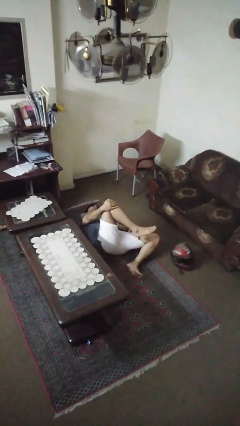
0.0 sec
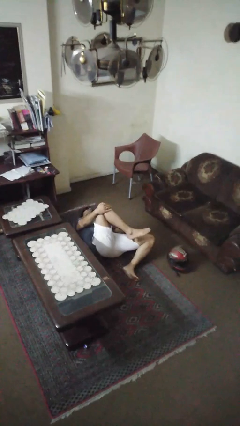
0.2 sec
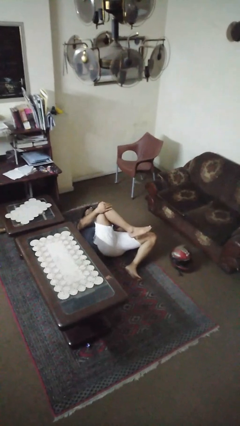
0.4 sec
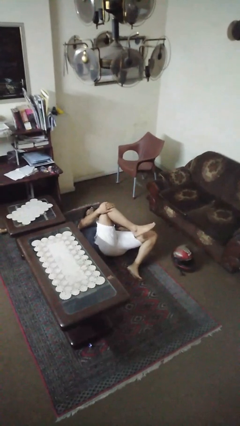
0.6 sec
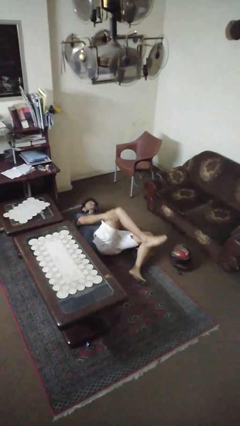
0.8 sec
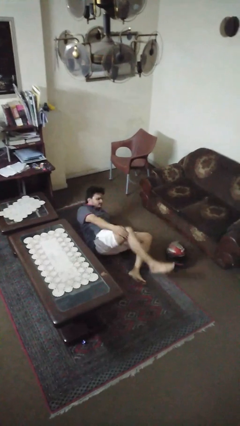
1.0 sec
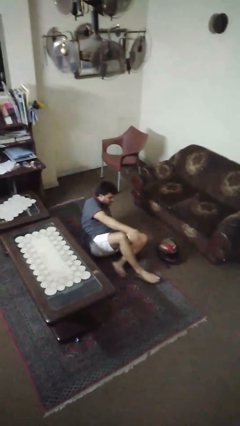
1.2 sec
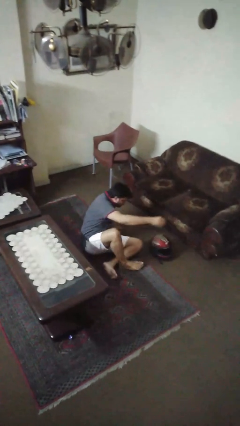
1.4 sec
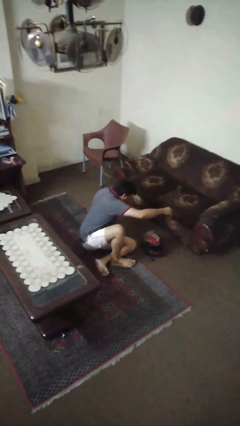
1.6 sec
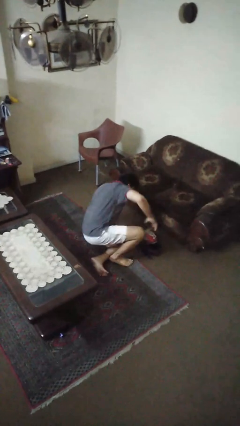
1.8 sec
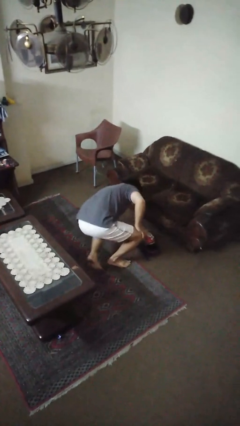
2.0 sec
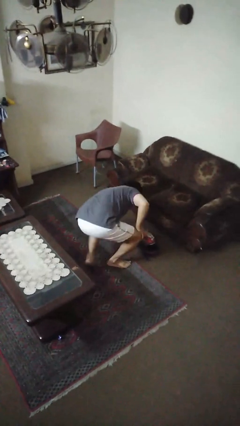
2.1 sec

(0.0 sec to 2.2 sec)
person stands up from floor

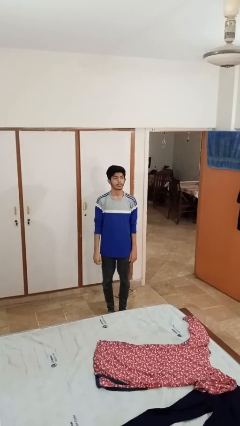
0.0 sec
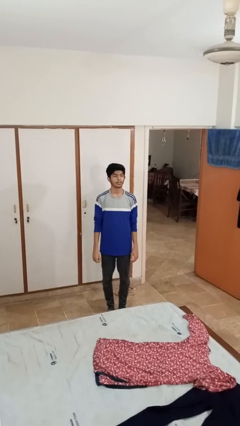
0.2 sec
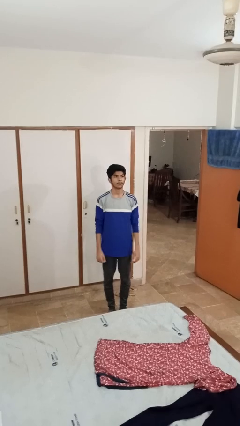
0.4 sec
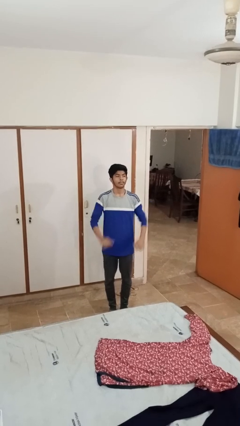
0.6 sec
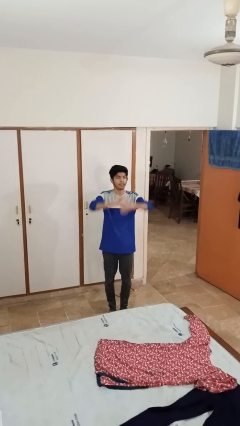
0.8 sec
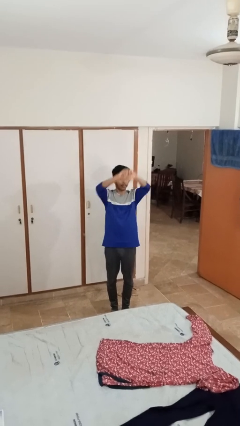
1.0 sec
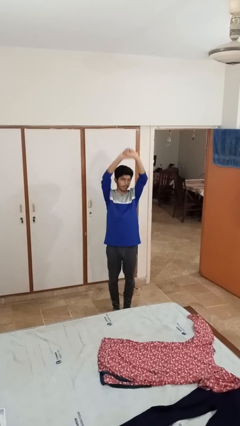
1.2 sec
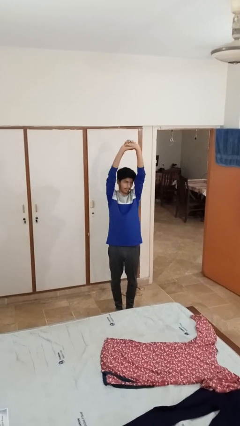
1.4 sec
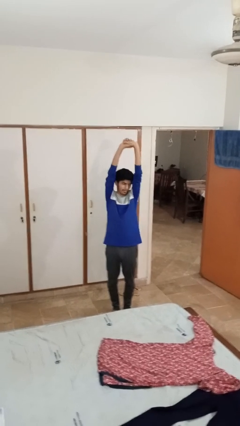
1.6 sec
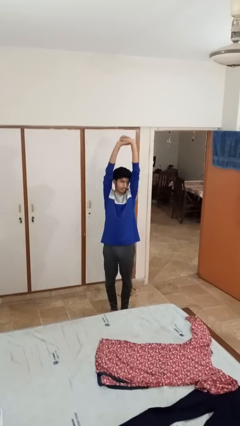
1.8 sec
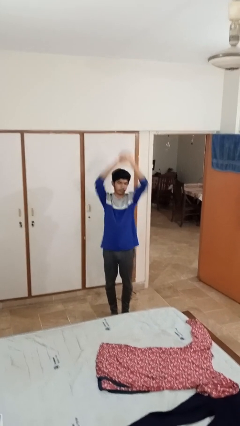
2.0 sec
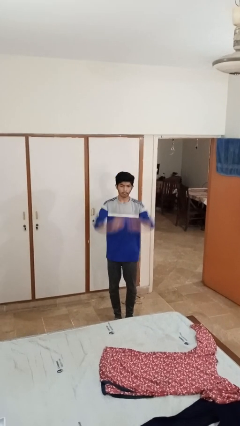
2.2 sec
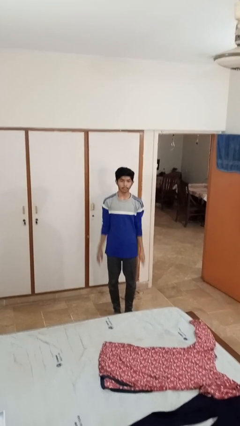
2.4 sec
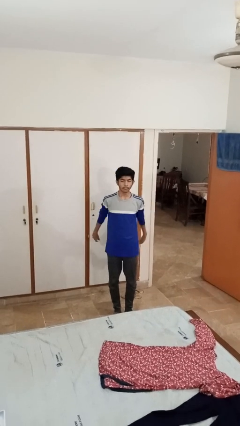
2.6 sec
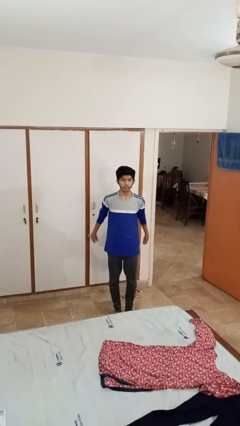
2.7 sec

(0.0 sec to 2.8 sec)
person stretches arms over head

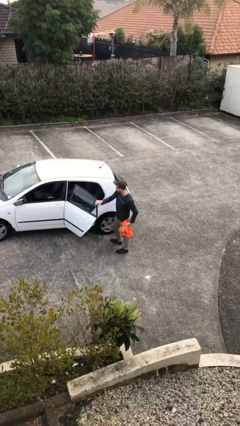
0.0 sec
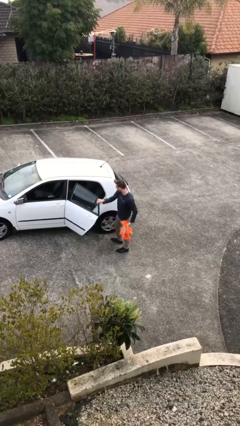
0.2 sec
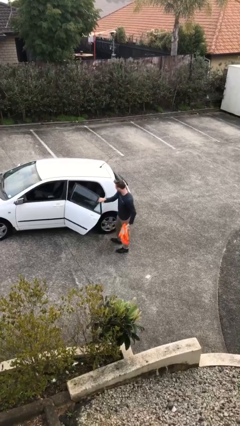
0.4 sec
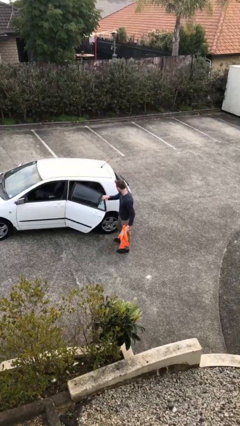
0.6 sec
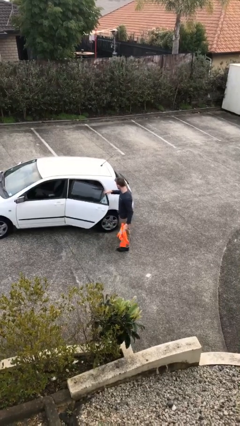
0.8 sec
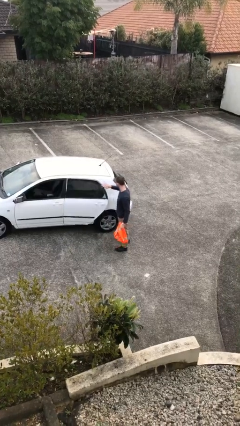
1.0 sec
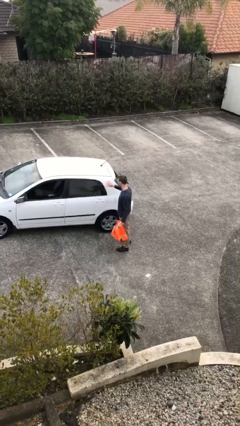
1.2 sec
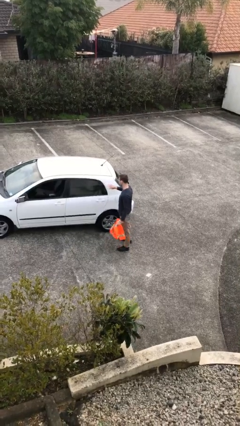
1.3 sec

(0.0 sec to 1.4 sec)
person closes car door

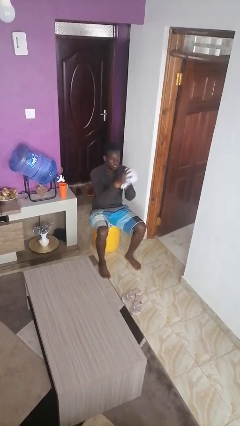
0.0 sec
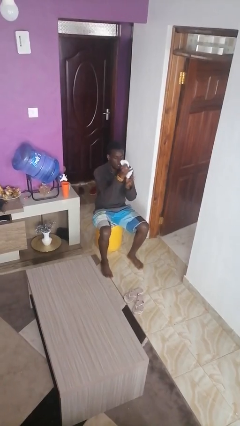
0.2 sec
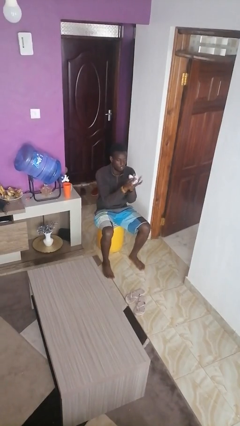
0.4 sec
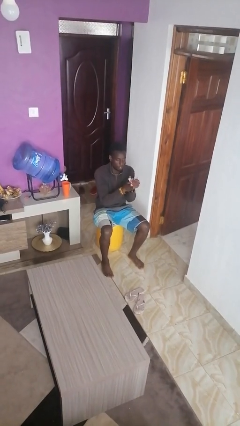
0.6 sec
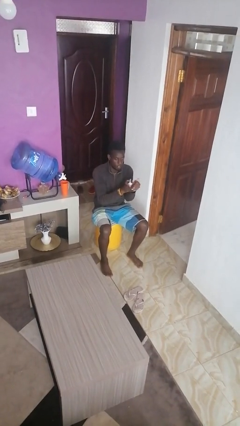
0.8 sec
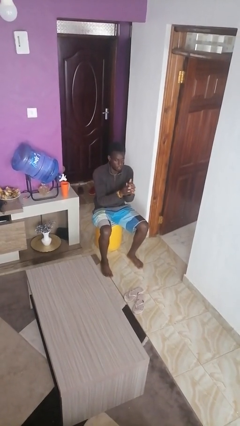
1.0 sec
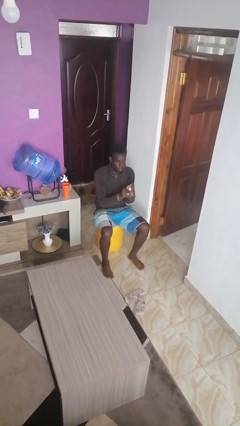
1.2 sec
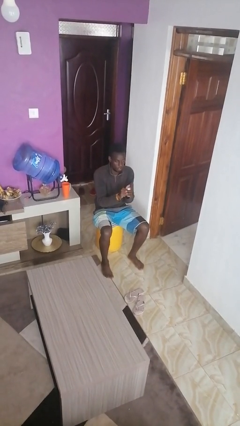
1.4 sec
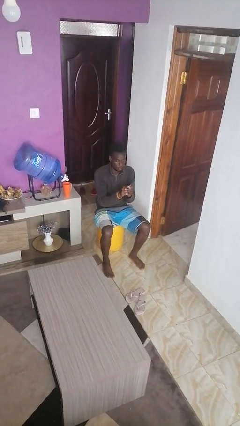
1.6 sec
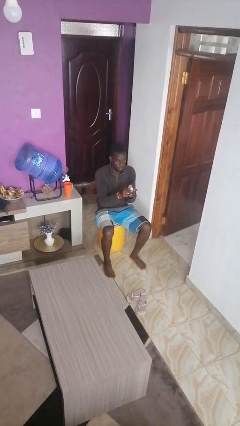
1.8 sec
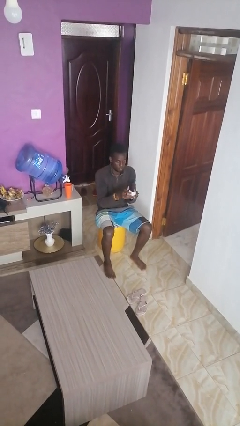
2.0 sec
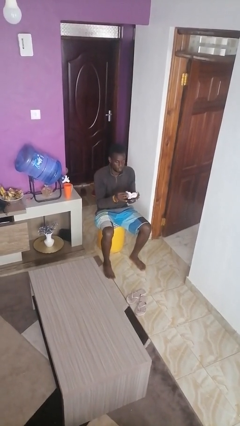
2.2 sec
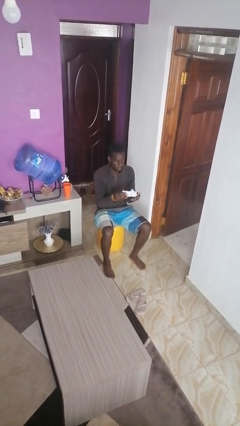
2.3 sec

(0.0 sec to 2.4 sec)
person crumples paper

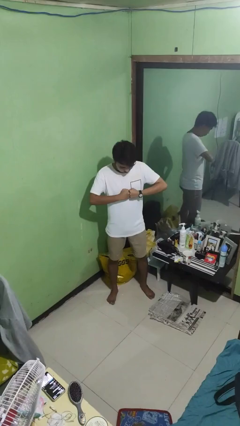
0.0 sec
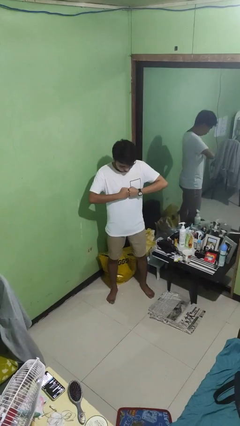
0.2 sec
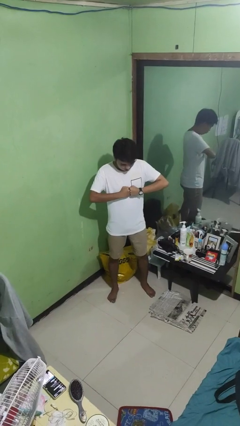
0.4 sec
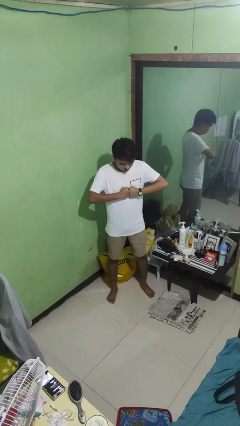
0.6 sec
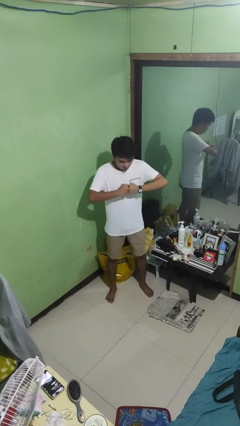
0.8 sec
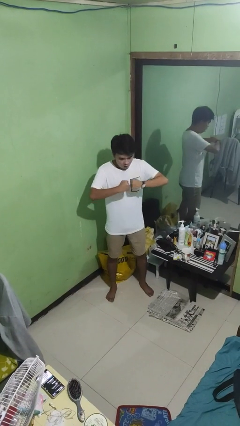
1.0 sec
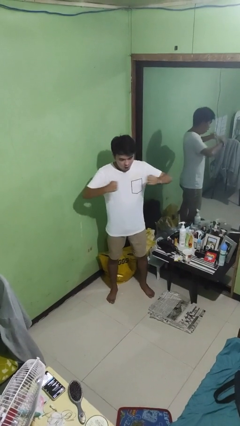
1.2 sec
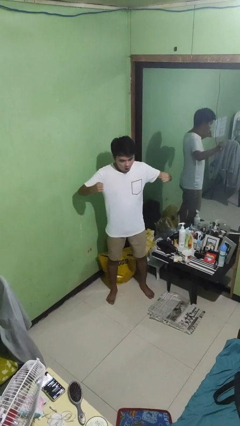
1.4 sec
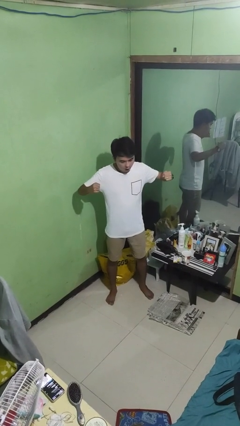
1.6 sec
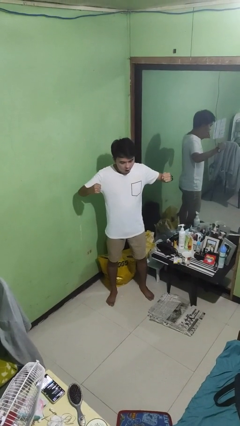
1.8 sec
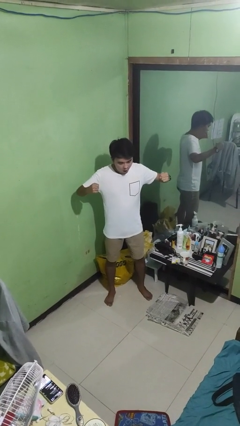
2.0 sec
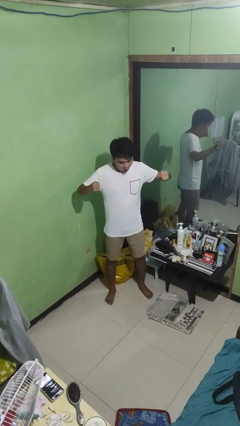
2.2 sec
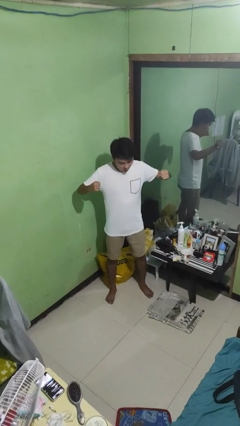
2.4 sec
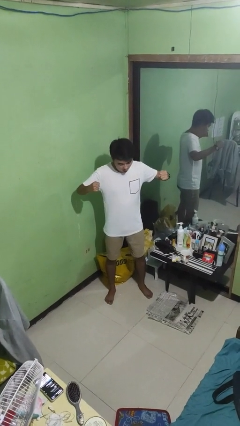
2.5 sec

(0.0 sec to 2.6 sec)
person gestures zoom in

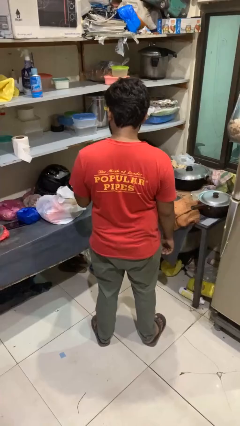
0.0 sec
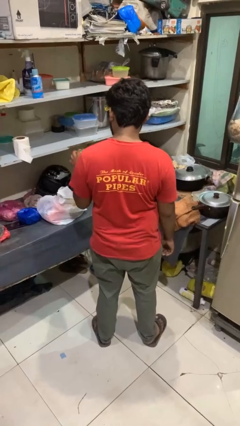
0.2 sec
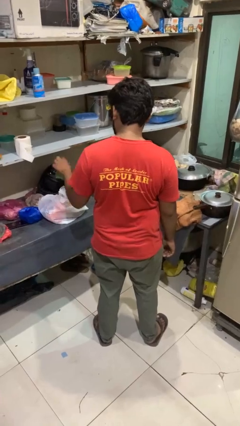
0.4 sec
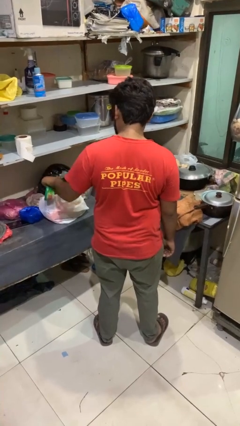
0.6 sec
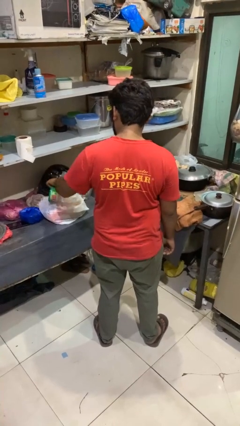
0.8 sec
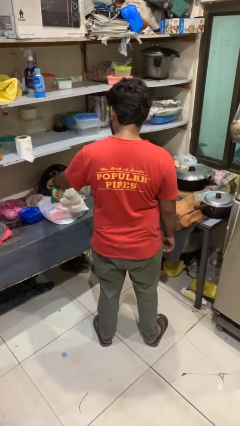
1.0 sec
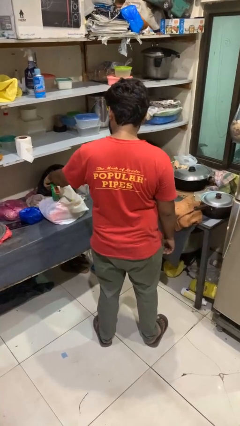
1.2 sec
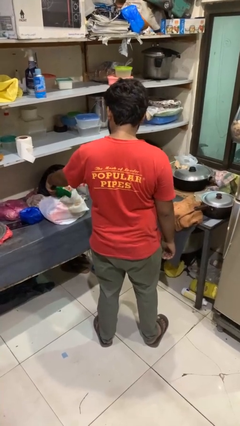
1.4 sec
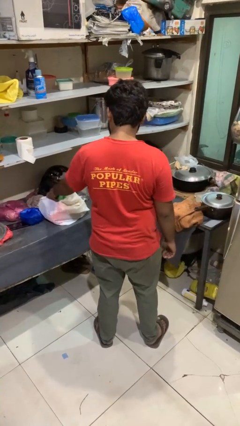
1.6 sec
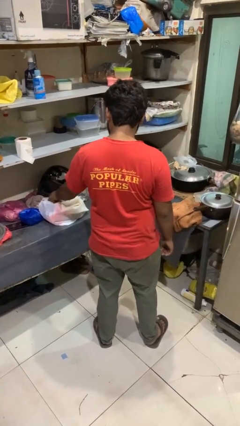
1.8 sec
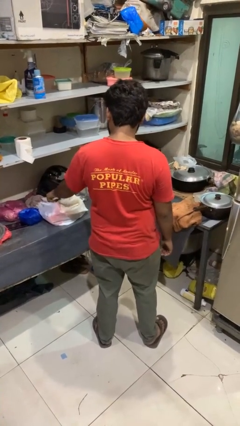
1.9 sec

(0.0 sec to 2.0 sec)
person puts object into bag

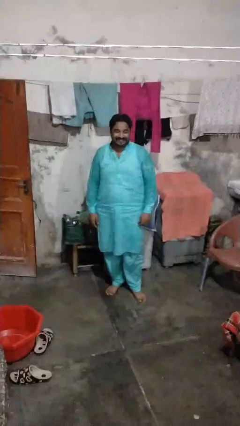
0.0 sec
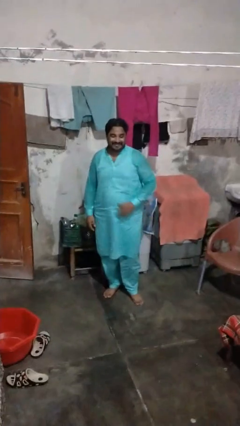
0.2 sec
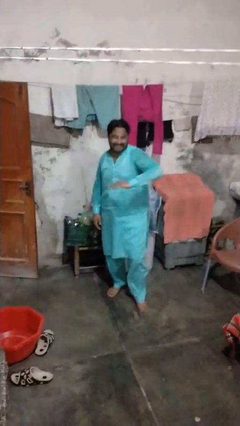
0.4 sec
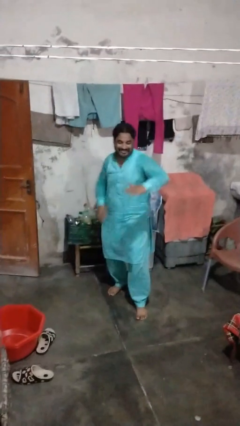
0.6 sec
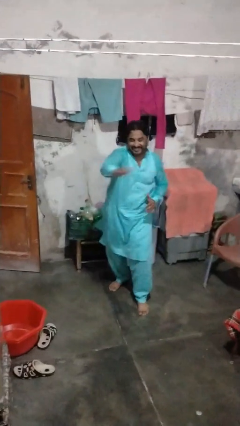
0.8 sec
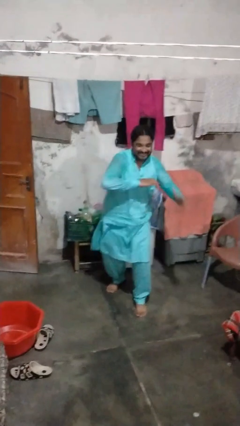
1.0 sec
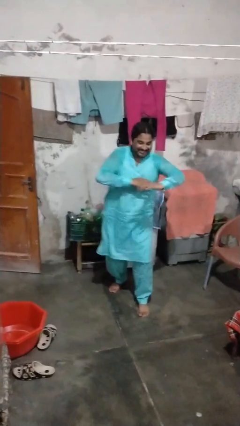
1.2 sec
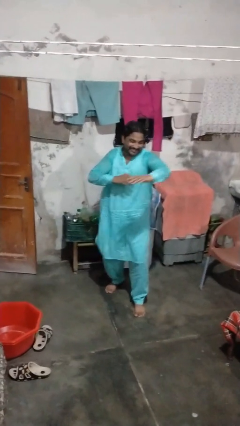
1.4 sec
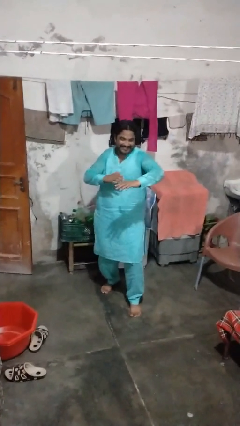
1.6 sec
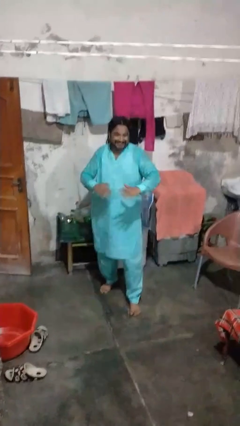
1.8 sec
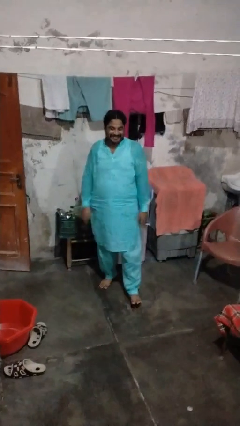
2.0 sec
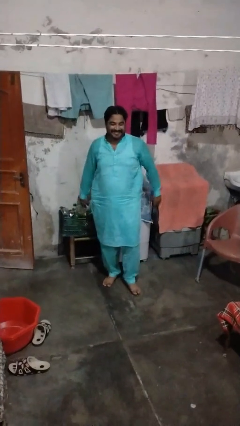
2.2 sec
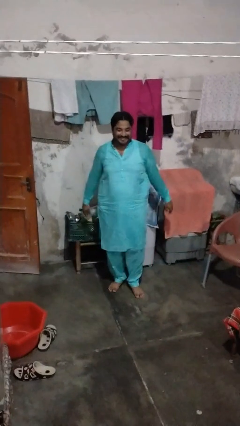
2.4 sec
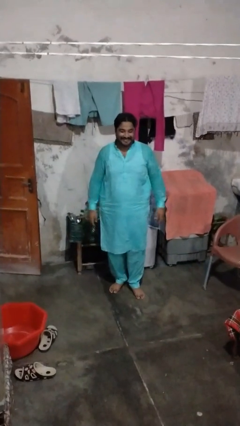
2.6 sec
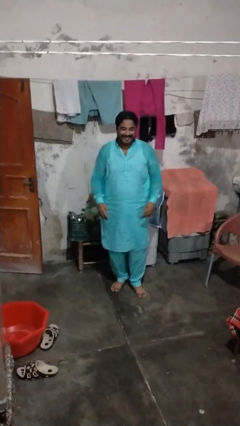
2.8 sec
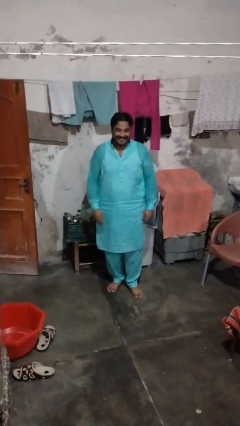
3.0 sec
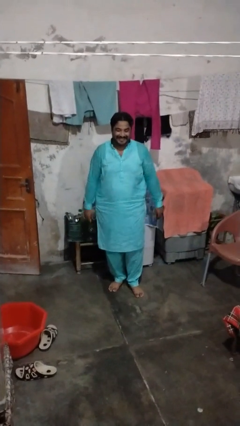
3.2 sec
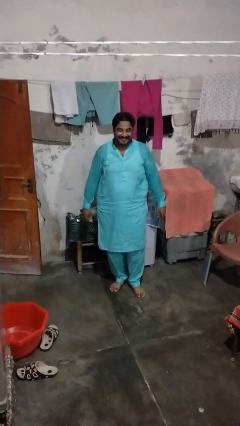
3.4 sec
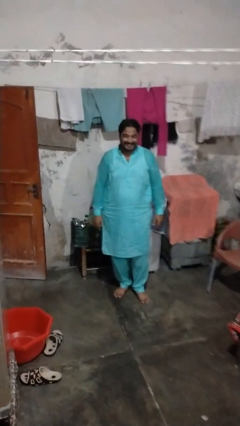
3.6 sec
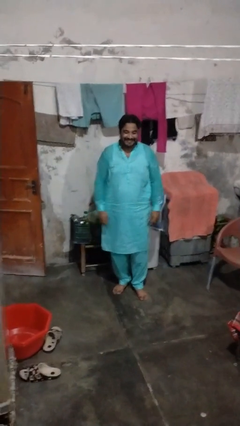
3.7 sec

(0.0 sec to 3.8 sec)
person karate chop
